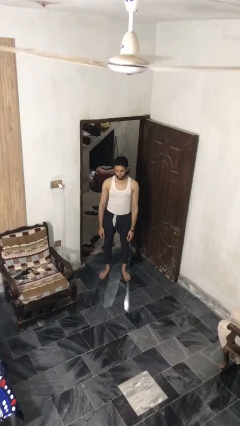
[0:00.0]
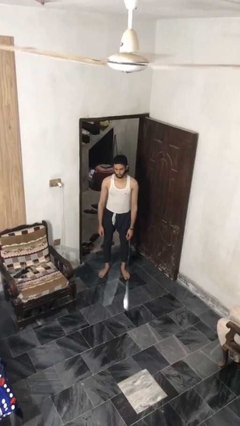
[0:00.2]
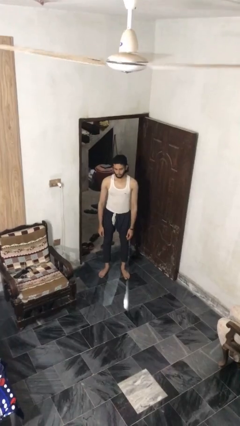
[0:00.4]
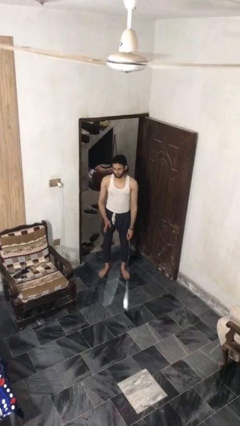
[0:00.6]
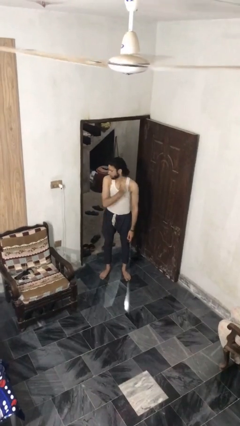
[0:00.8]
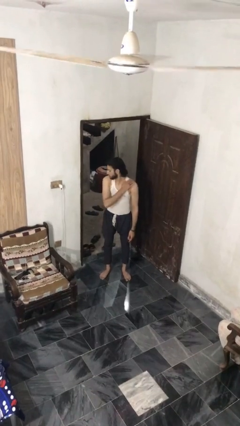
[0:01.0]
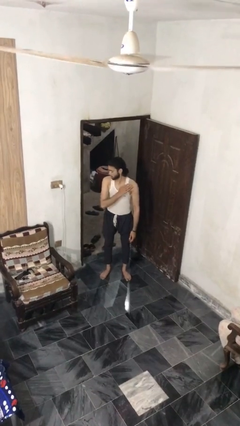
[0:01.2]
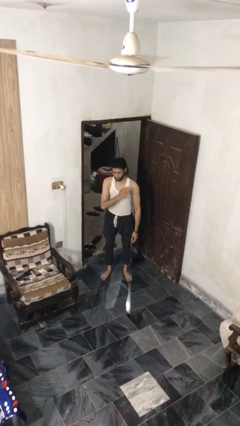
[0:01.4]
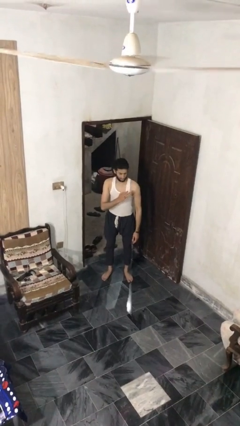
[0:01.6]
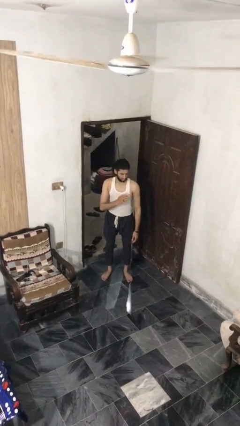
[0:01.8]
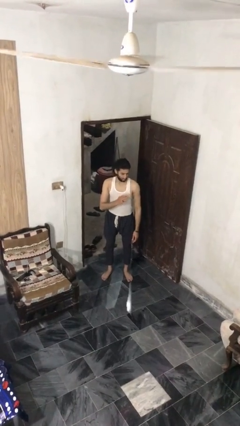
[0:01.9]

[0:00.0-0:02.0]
person swats bug

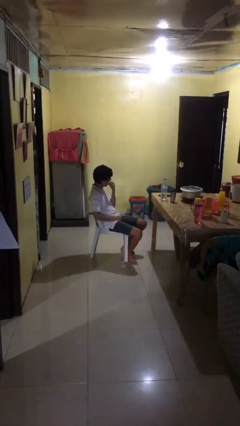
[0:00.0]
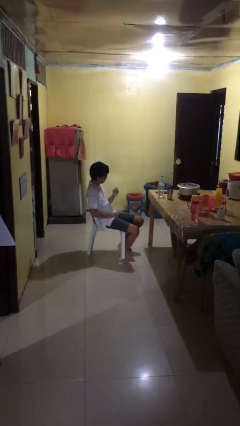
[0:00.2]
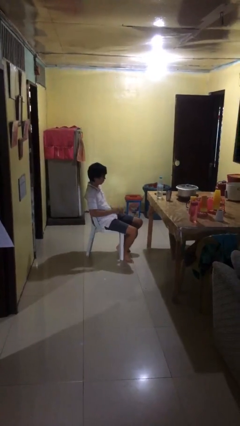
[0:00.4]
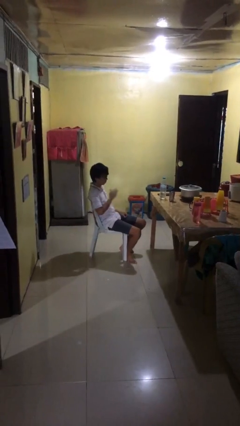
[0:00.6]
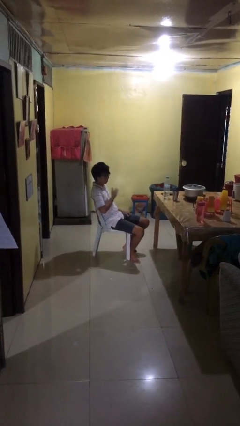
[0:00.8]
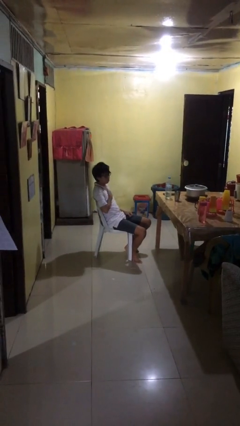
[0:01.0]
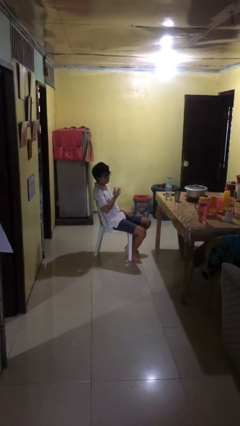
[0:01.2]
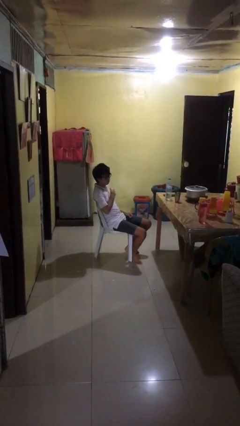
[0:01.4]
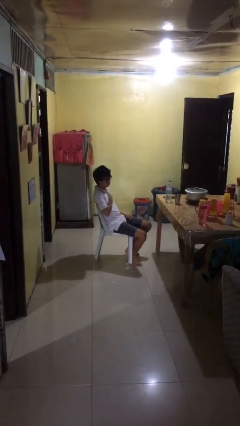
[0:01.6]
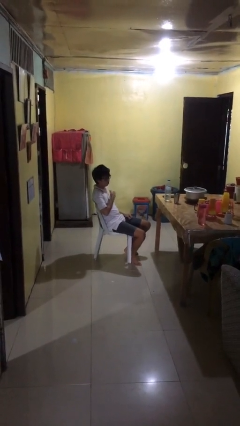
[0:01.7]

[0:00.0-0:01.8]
person drums on chest

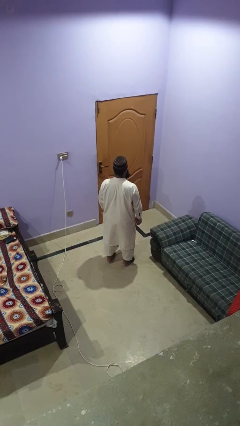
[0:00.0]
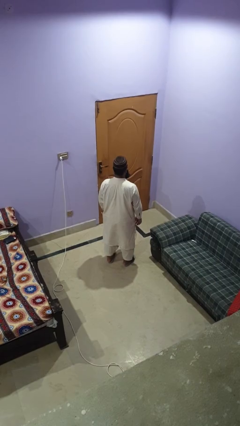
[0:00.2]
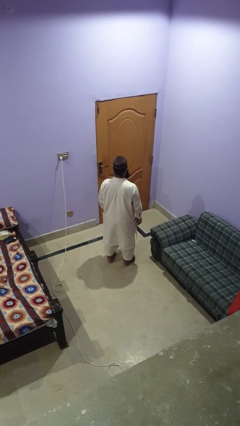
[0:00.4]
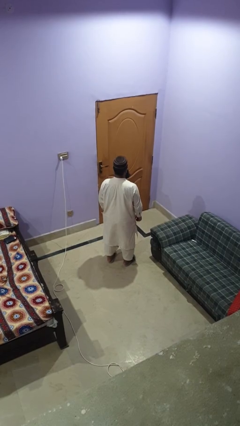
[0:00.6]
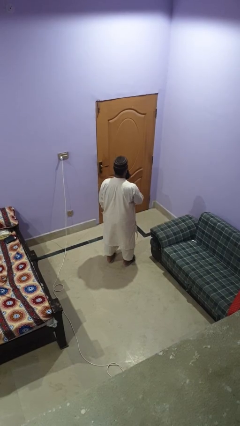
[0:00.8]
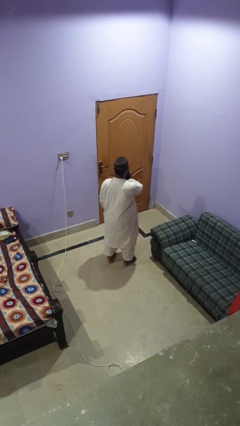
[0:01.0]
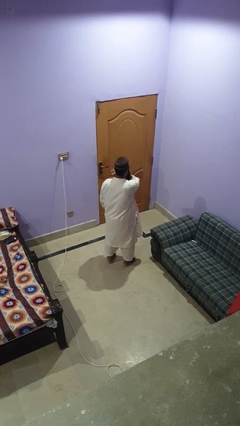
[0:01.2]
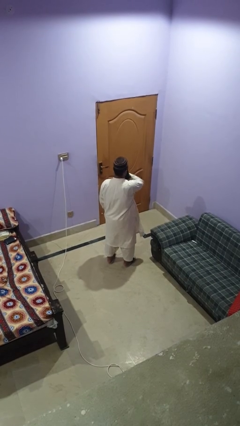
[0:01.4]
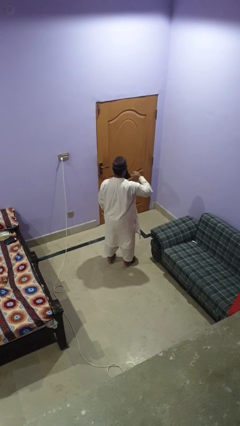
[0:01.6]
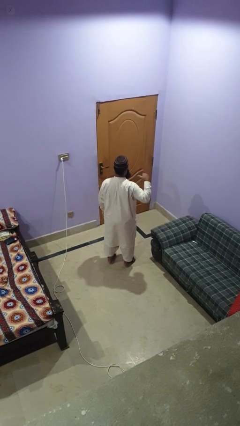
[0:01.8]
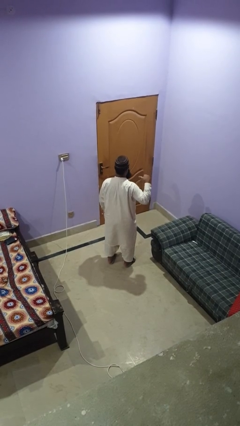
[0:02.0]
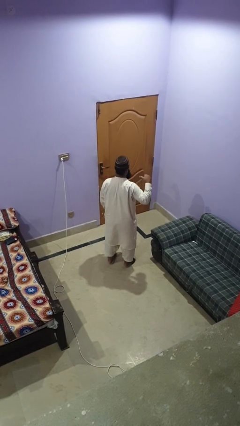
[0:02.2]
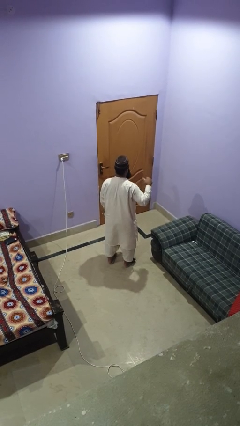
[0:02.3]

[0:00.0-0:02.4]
person gestures cut

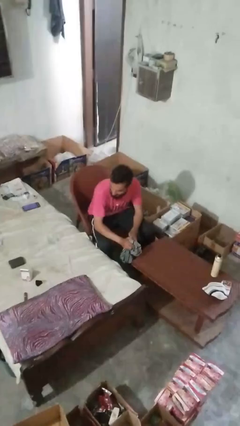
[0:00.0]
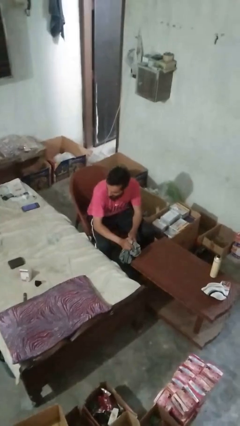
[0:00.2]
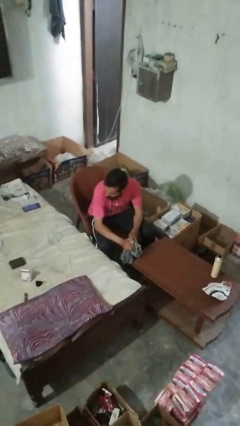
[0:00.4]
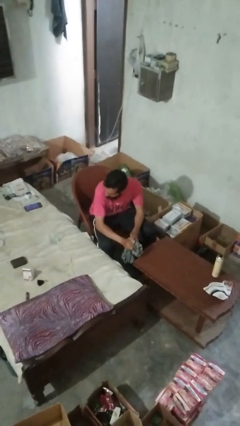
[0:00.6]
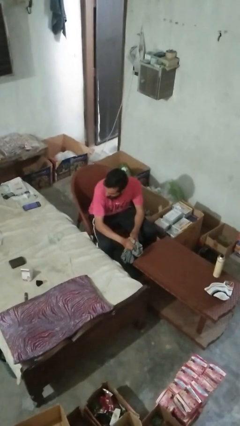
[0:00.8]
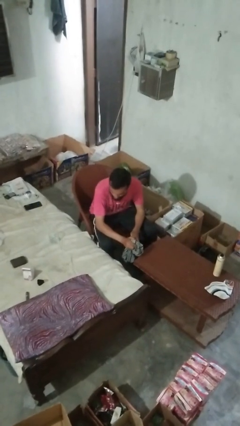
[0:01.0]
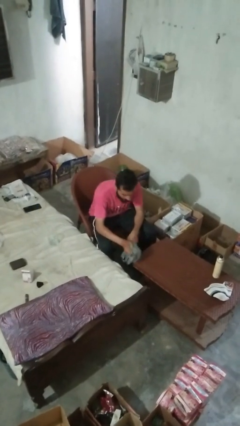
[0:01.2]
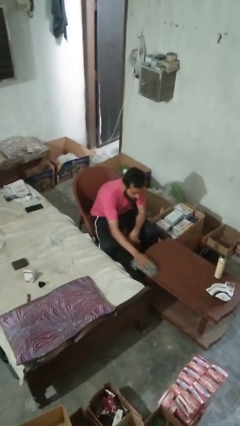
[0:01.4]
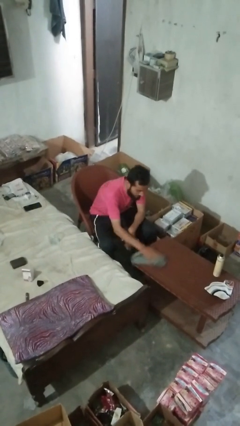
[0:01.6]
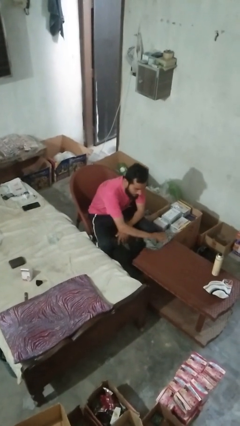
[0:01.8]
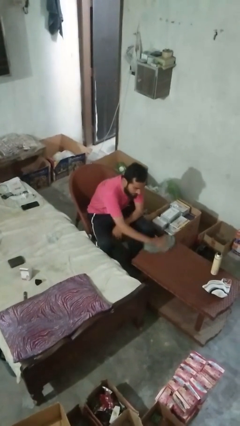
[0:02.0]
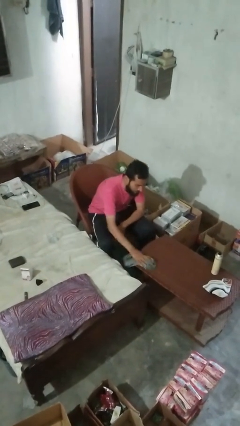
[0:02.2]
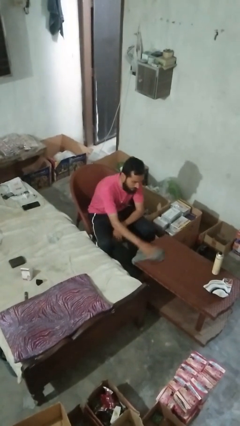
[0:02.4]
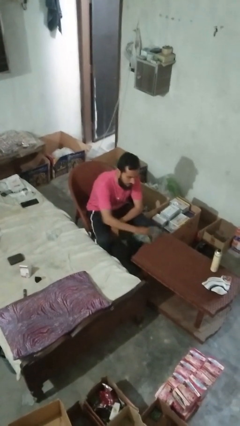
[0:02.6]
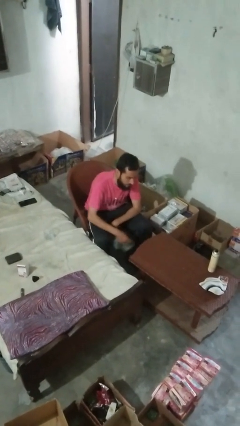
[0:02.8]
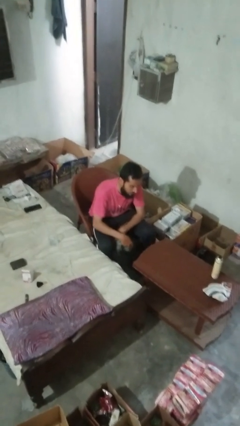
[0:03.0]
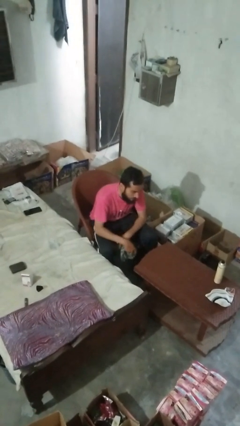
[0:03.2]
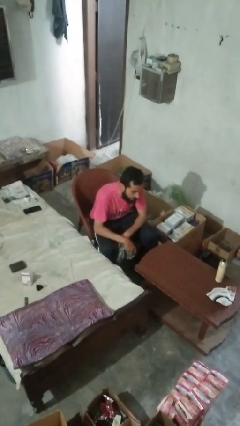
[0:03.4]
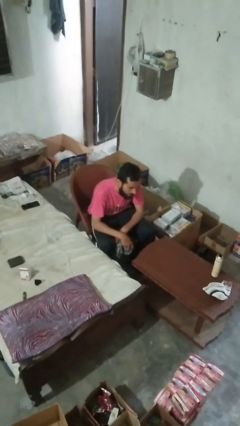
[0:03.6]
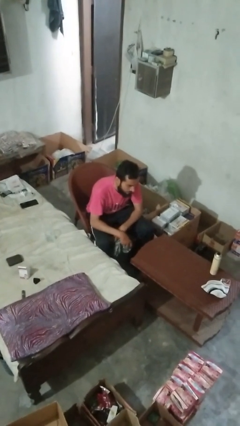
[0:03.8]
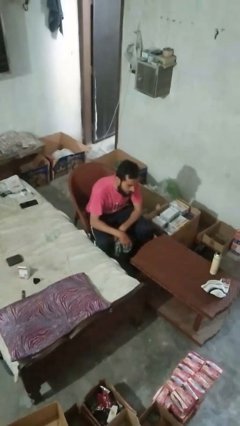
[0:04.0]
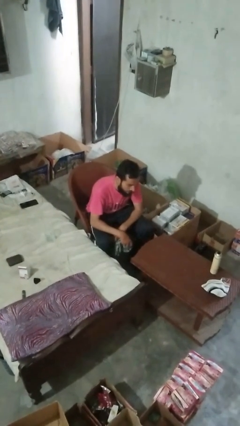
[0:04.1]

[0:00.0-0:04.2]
person cleans table with rag

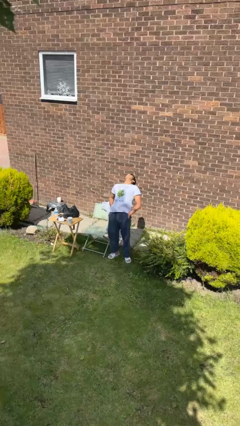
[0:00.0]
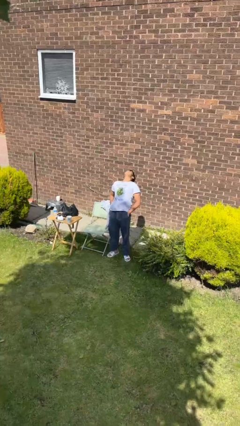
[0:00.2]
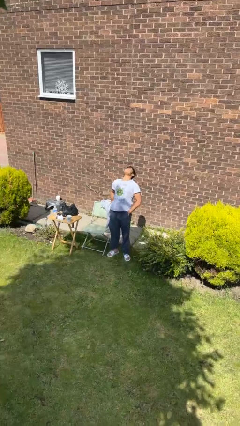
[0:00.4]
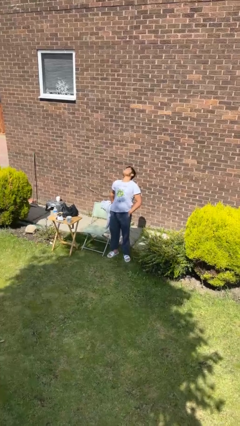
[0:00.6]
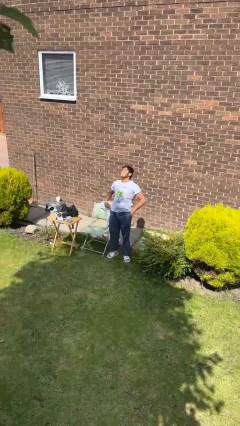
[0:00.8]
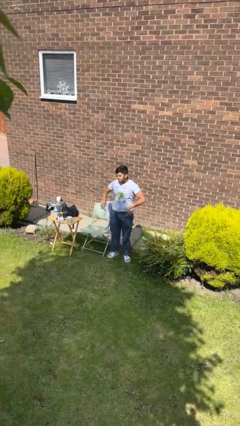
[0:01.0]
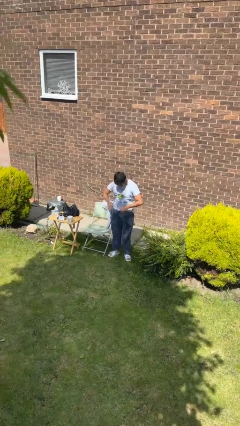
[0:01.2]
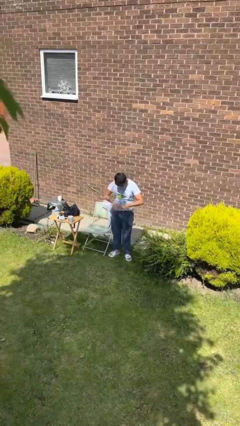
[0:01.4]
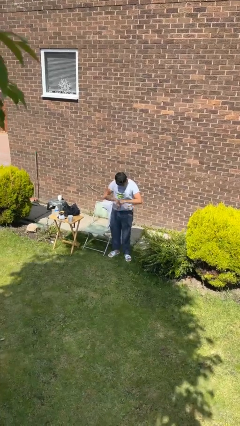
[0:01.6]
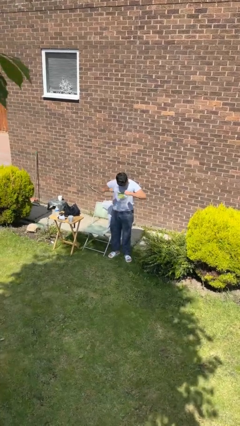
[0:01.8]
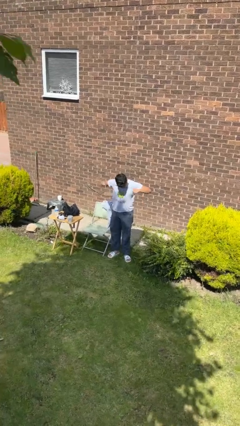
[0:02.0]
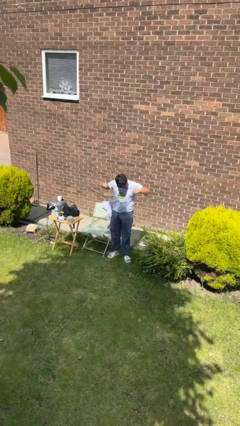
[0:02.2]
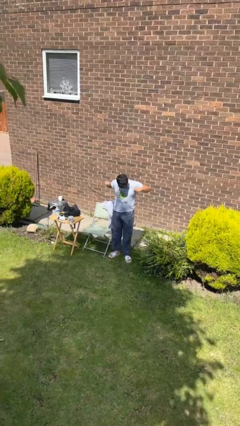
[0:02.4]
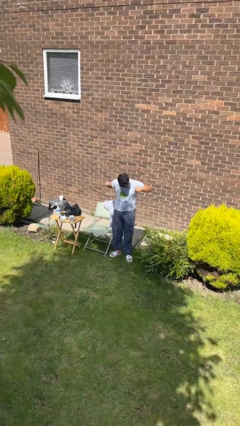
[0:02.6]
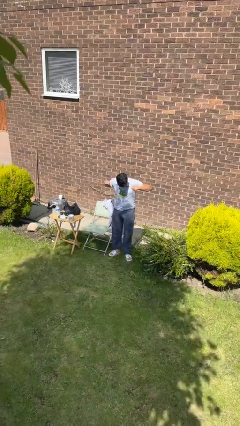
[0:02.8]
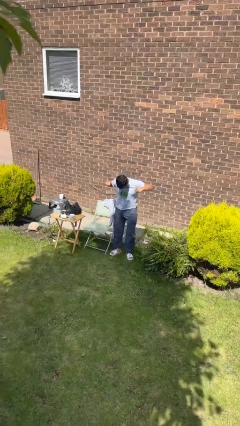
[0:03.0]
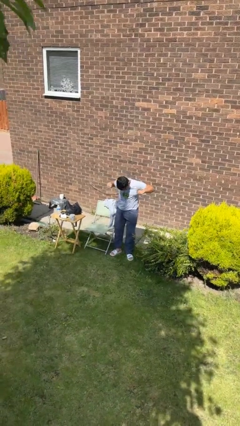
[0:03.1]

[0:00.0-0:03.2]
person stretches arms to side

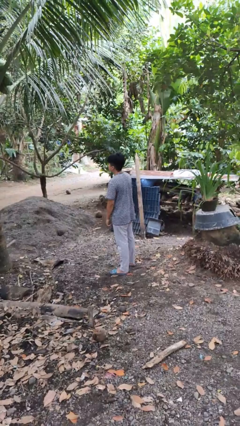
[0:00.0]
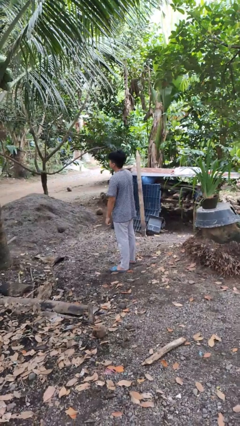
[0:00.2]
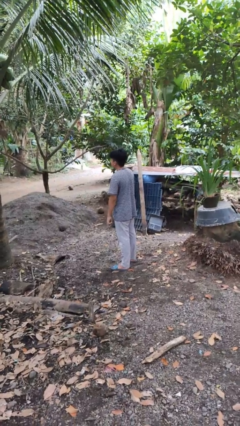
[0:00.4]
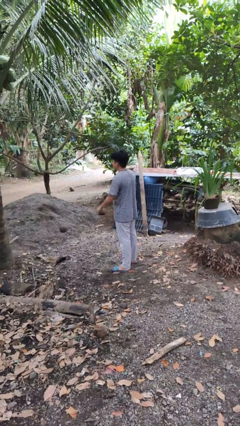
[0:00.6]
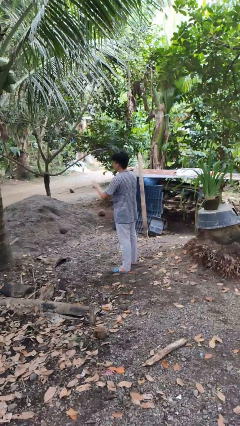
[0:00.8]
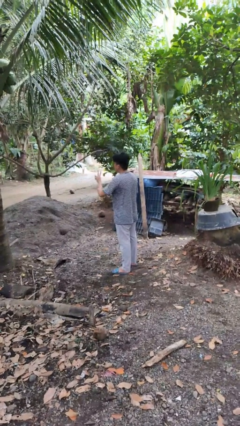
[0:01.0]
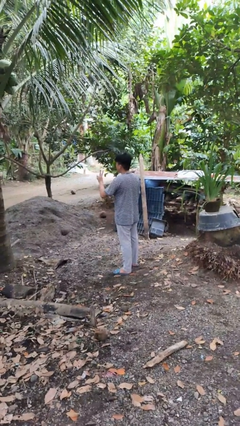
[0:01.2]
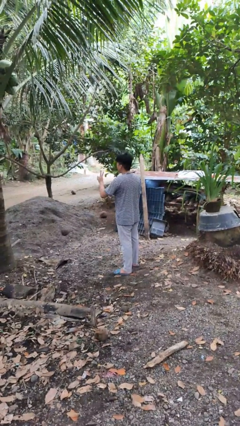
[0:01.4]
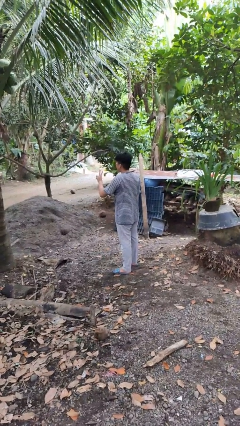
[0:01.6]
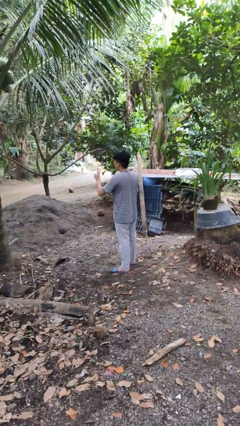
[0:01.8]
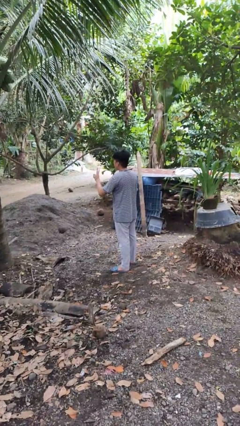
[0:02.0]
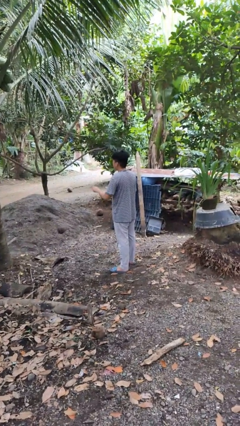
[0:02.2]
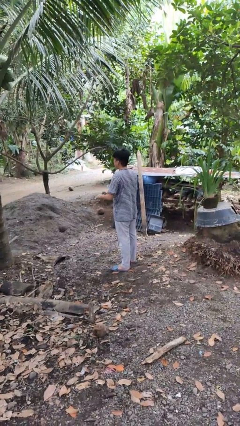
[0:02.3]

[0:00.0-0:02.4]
person gestures peace

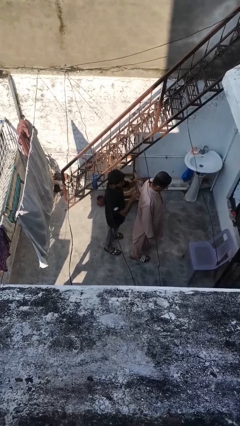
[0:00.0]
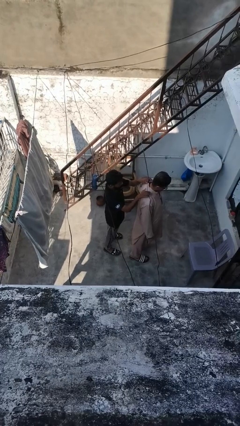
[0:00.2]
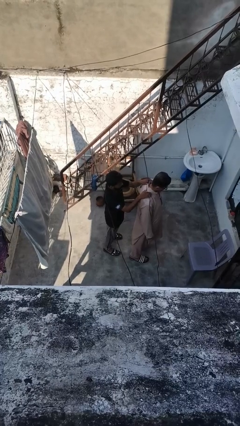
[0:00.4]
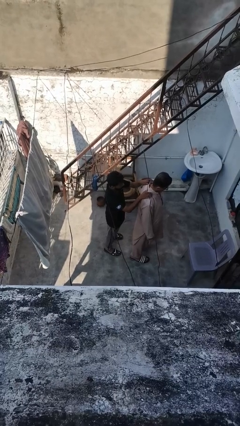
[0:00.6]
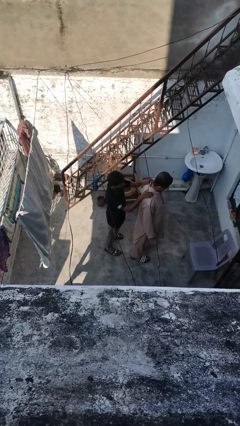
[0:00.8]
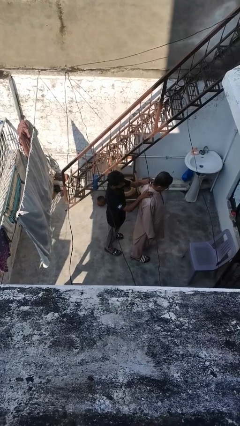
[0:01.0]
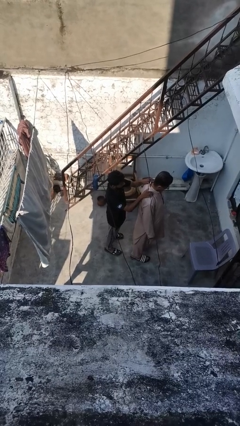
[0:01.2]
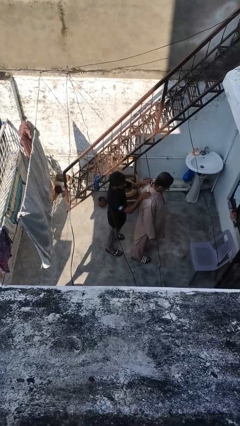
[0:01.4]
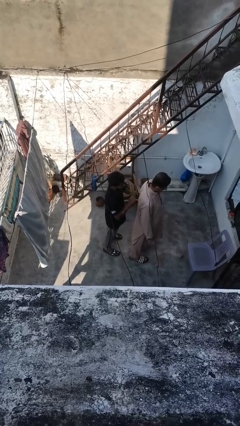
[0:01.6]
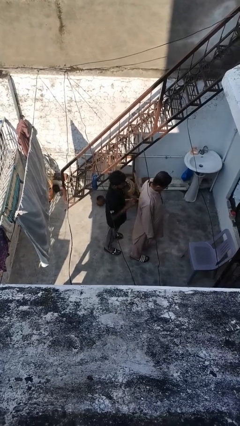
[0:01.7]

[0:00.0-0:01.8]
person pounds shoulders of person
